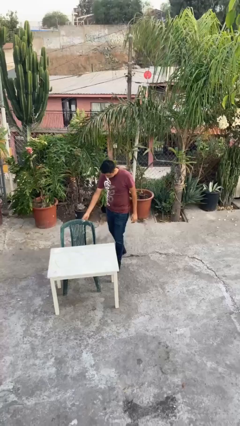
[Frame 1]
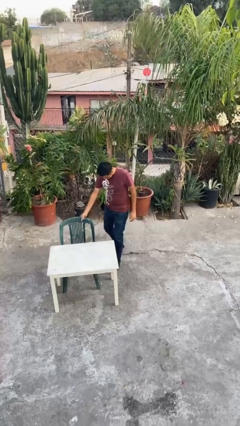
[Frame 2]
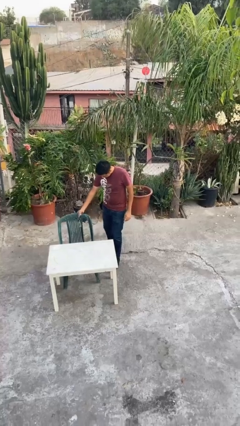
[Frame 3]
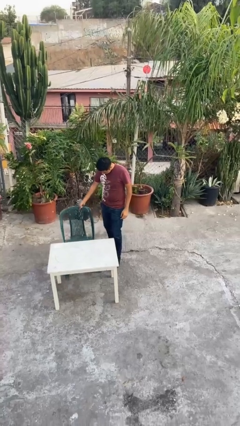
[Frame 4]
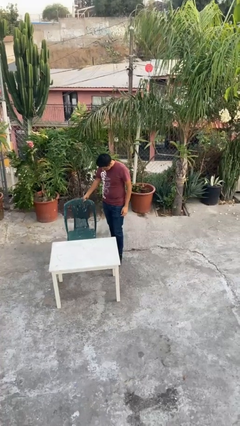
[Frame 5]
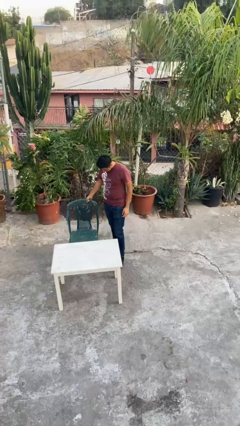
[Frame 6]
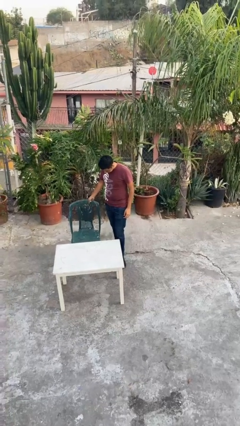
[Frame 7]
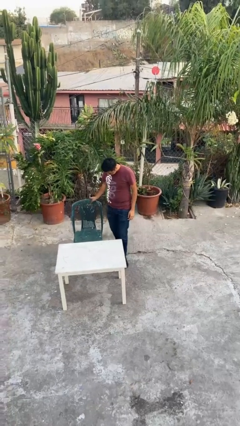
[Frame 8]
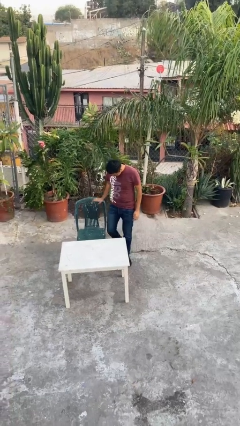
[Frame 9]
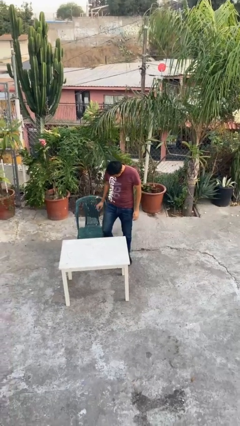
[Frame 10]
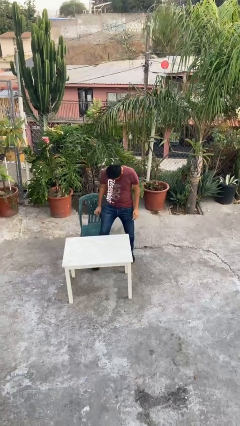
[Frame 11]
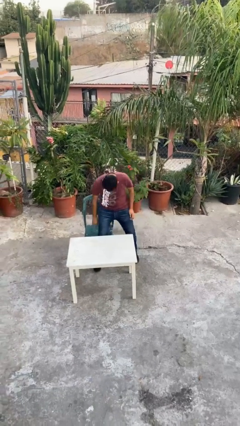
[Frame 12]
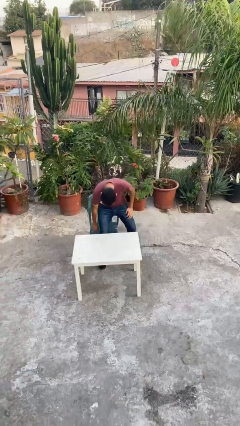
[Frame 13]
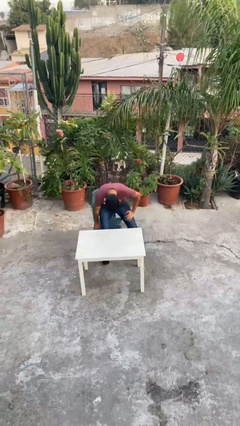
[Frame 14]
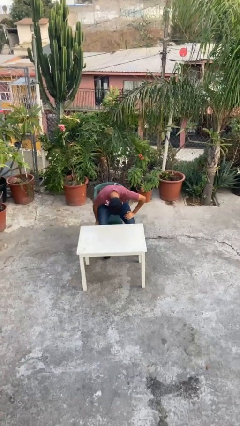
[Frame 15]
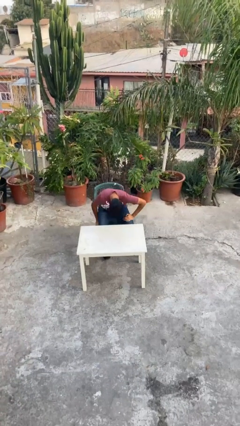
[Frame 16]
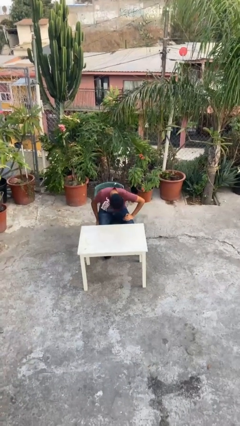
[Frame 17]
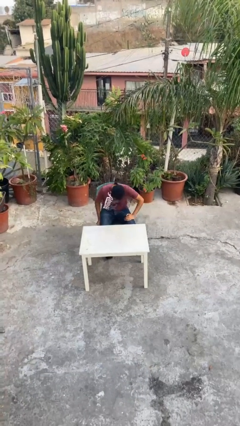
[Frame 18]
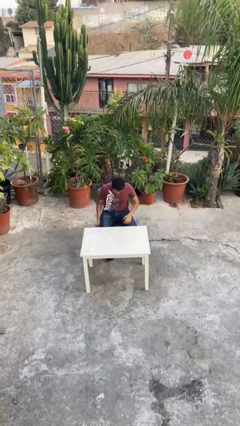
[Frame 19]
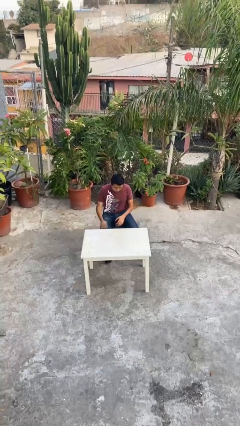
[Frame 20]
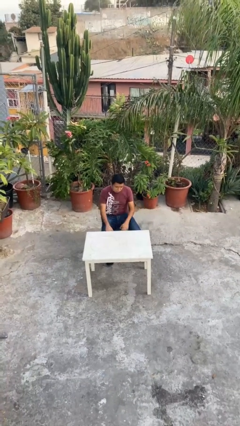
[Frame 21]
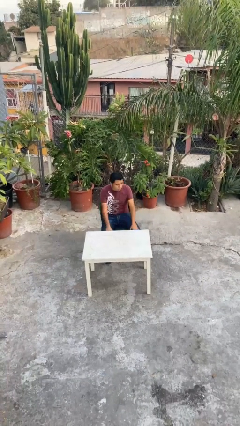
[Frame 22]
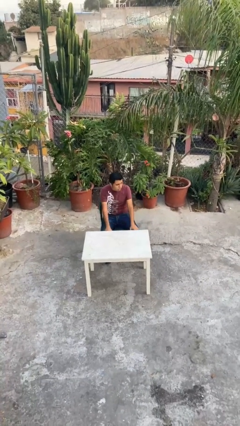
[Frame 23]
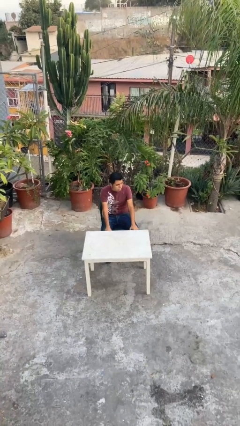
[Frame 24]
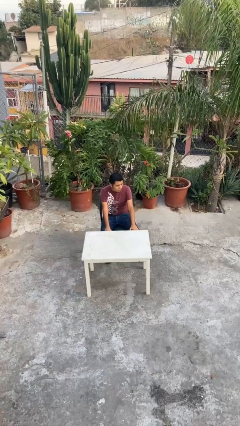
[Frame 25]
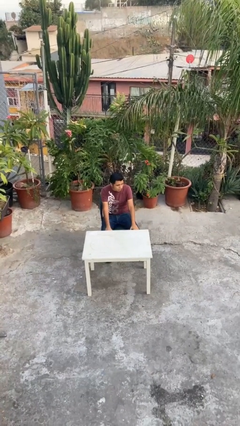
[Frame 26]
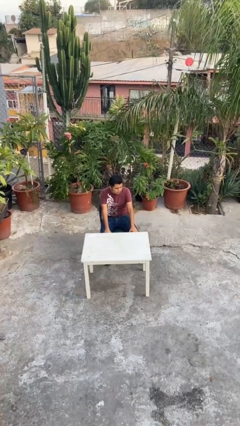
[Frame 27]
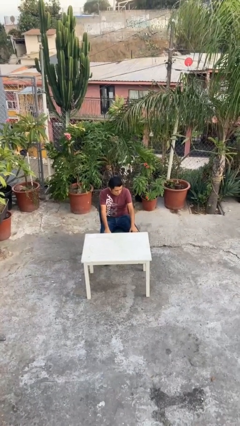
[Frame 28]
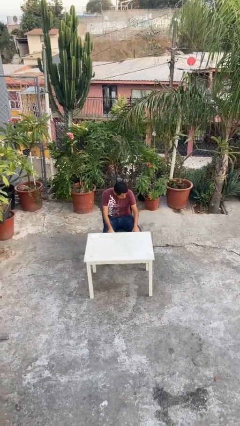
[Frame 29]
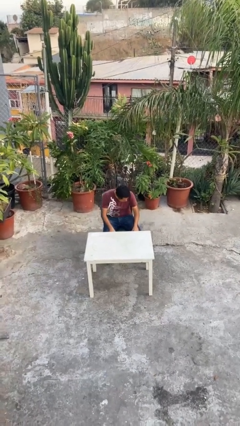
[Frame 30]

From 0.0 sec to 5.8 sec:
person sits down

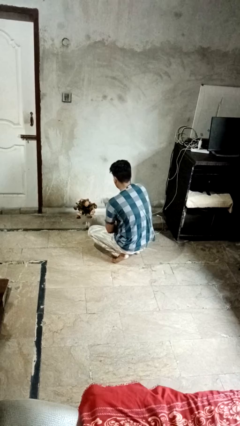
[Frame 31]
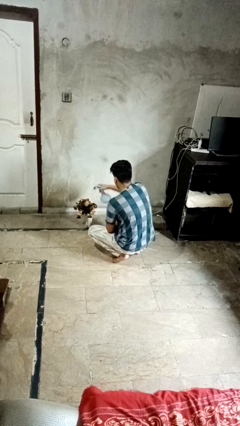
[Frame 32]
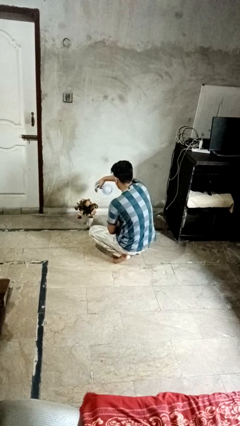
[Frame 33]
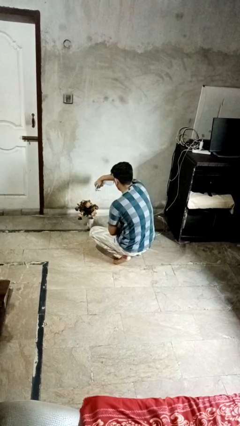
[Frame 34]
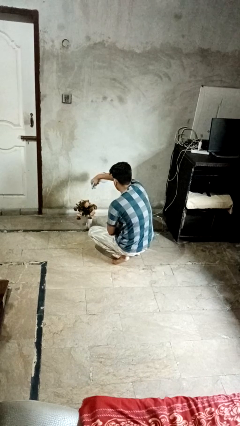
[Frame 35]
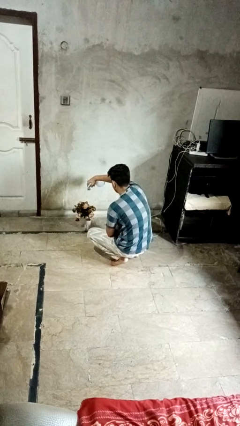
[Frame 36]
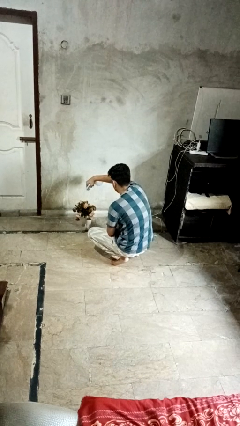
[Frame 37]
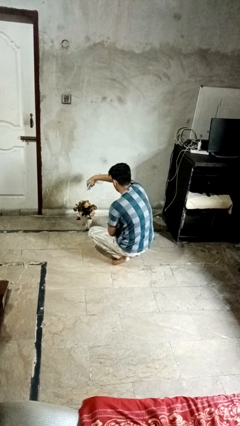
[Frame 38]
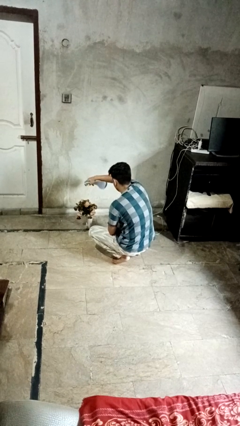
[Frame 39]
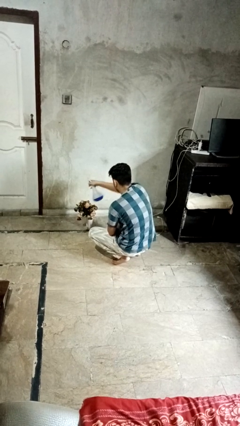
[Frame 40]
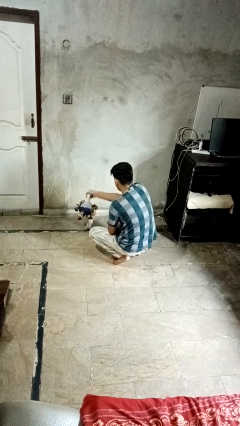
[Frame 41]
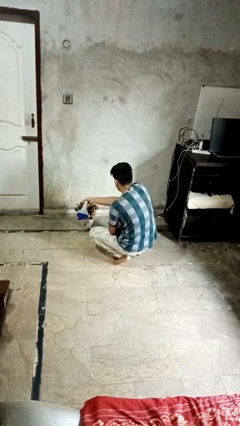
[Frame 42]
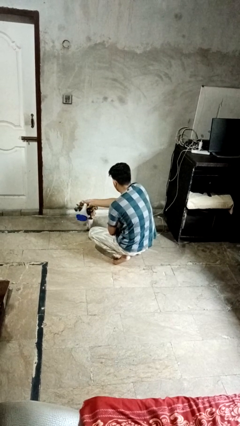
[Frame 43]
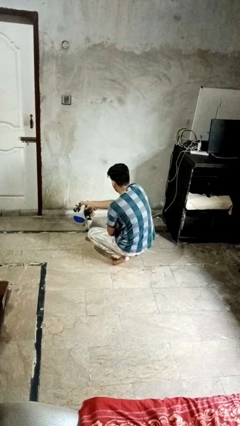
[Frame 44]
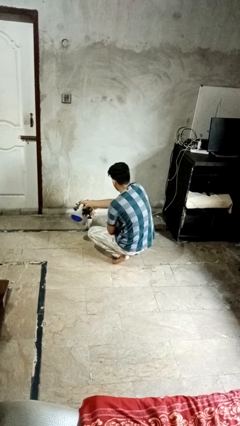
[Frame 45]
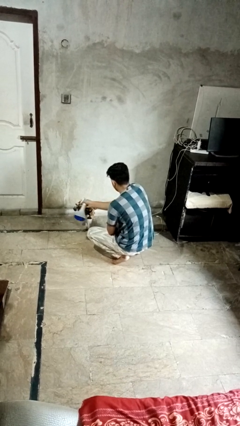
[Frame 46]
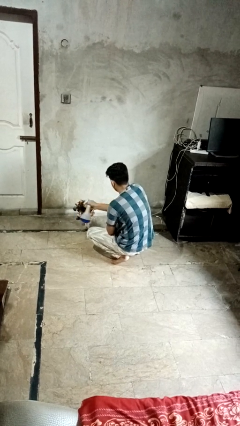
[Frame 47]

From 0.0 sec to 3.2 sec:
person waters houseplant

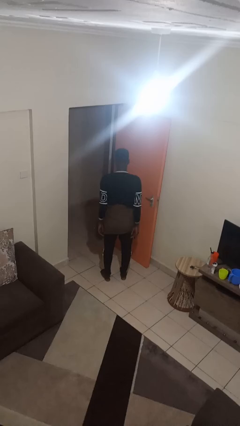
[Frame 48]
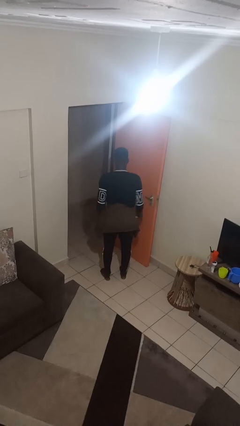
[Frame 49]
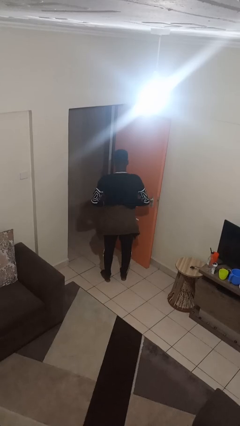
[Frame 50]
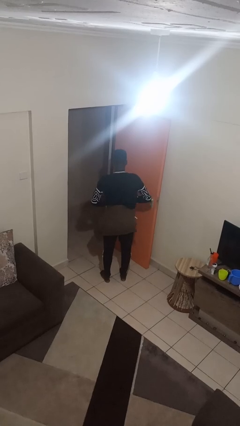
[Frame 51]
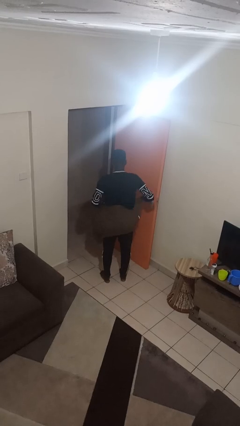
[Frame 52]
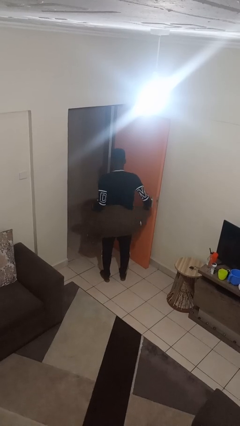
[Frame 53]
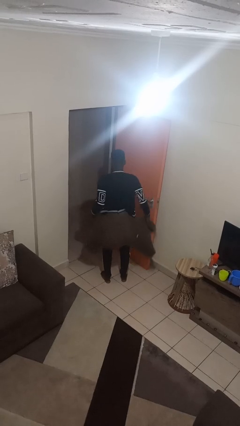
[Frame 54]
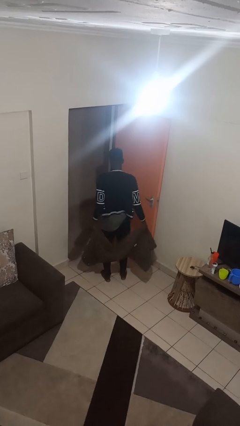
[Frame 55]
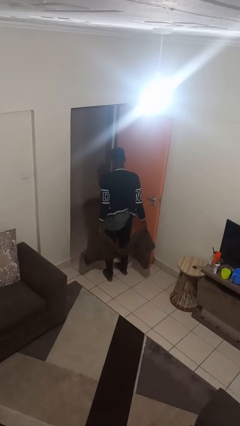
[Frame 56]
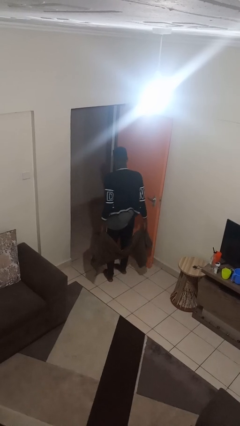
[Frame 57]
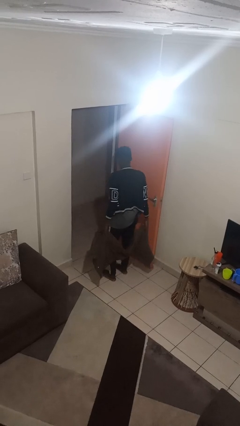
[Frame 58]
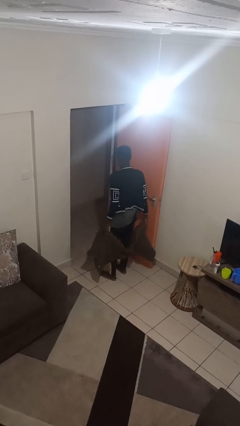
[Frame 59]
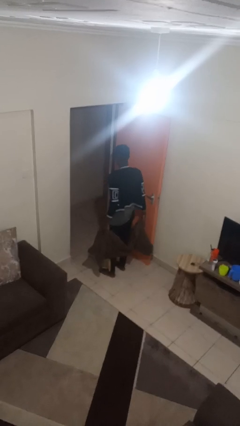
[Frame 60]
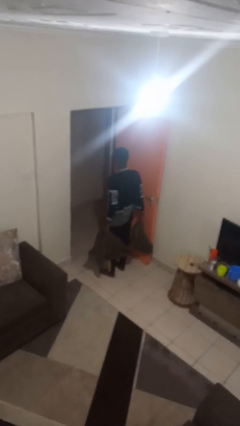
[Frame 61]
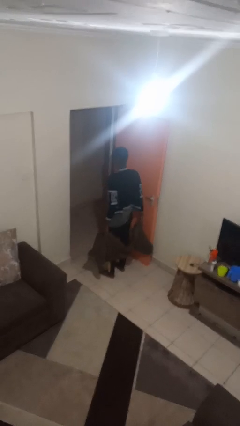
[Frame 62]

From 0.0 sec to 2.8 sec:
person unties jacket around waist

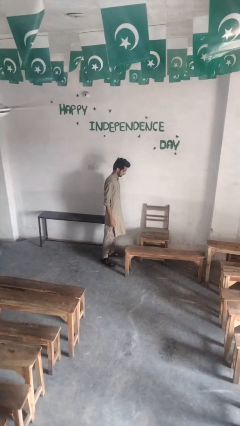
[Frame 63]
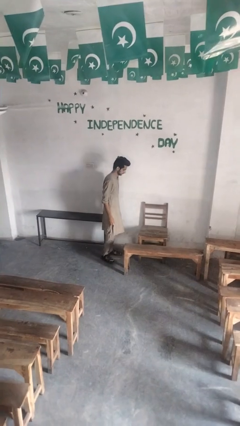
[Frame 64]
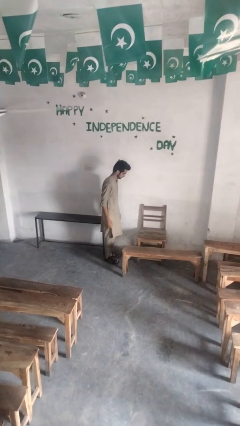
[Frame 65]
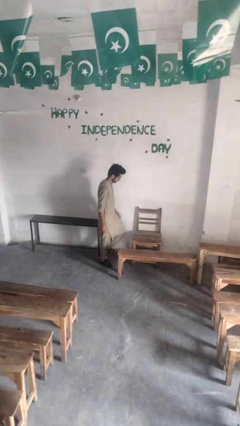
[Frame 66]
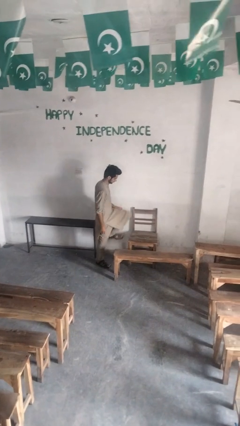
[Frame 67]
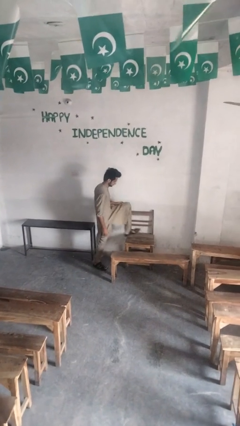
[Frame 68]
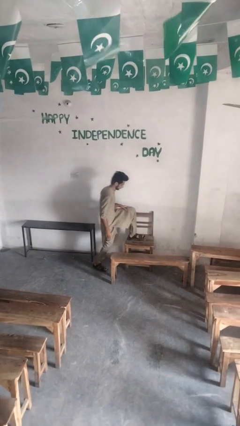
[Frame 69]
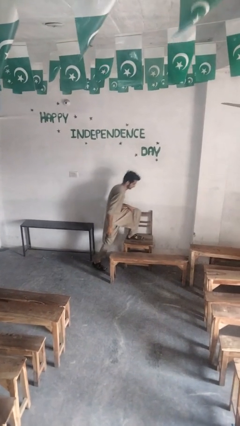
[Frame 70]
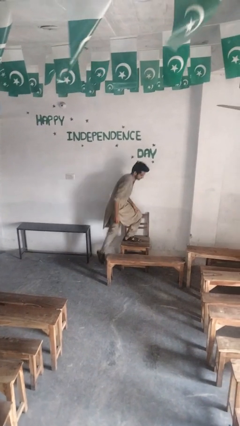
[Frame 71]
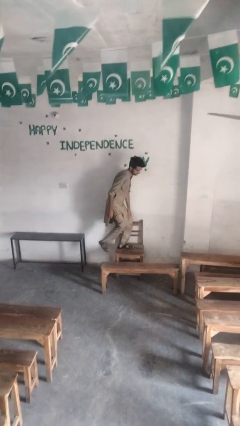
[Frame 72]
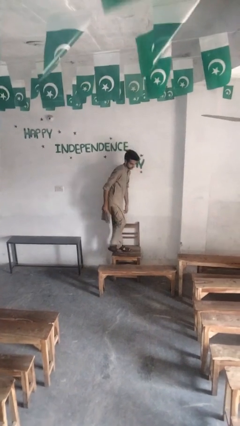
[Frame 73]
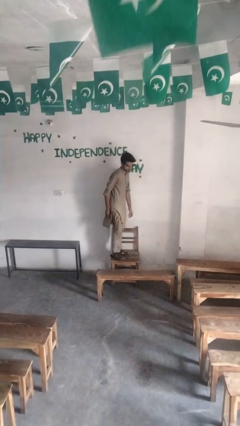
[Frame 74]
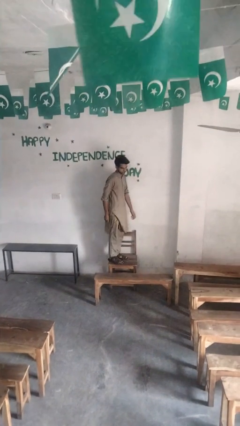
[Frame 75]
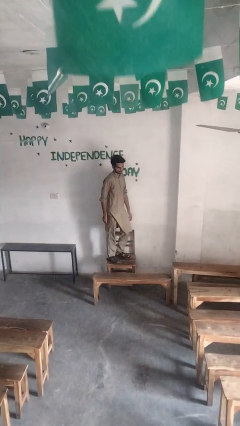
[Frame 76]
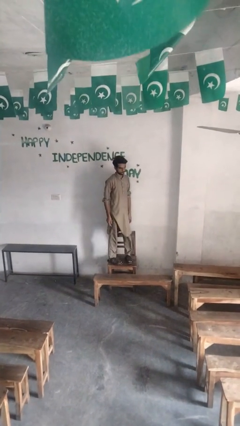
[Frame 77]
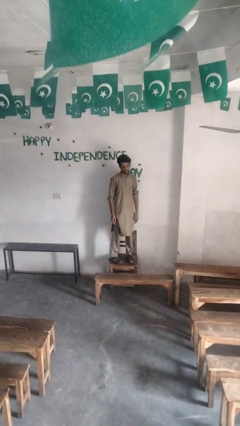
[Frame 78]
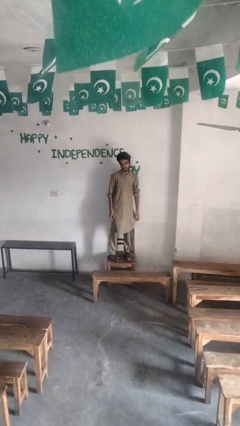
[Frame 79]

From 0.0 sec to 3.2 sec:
person climbs on chair

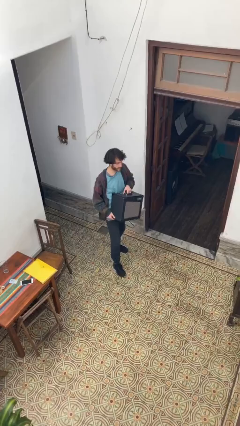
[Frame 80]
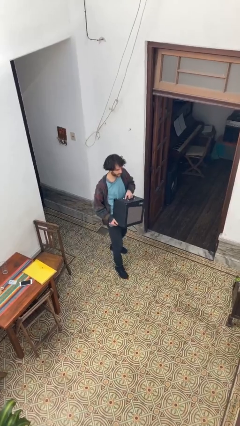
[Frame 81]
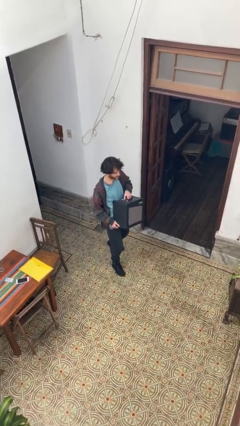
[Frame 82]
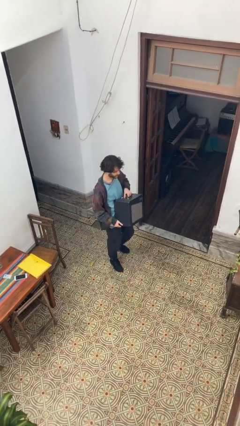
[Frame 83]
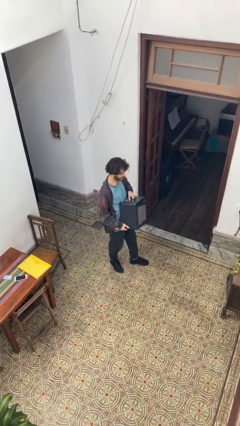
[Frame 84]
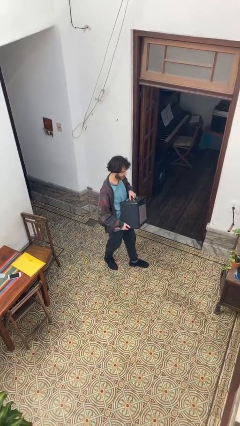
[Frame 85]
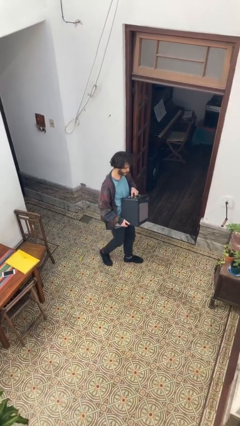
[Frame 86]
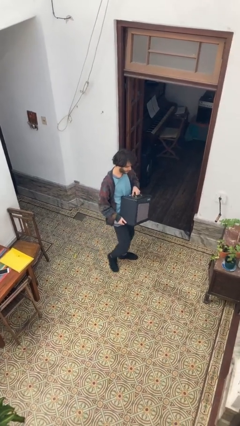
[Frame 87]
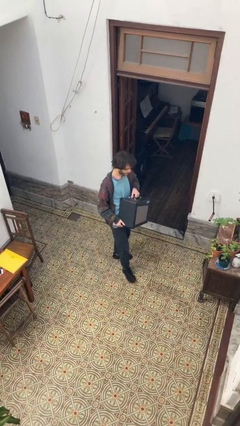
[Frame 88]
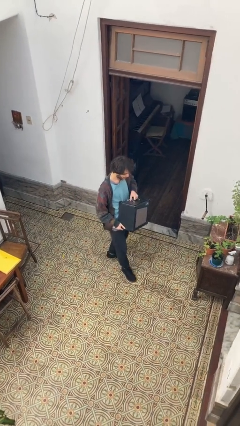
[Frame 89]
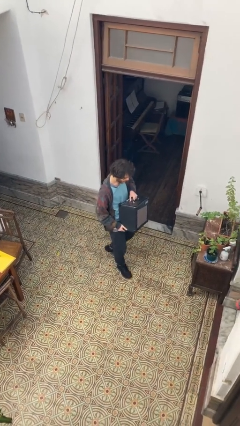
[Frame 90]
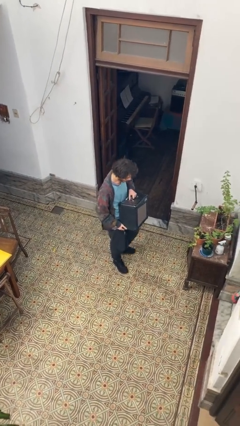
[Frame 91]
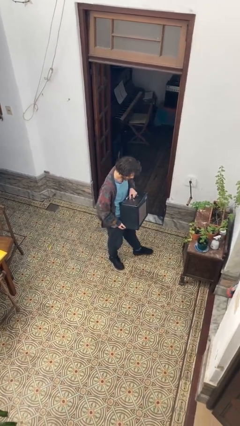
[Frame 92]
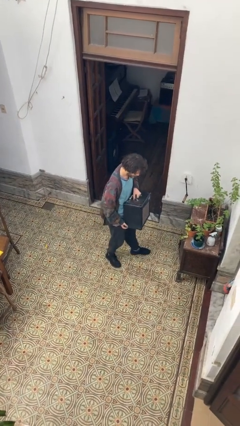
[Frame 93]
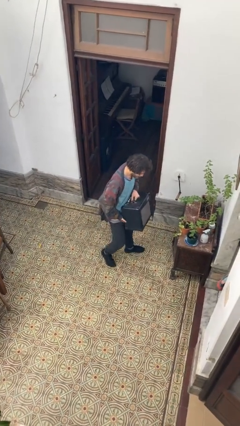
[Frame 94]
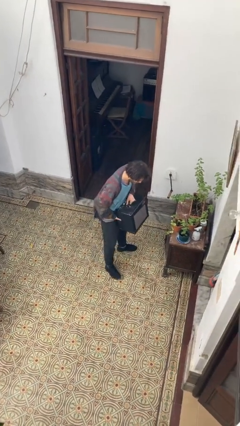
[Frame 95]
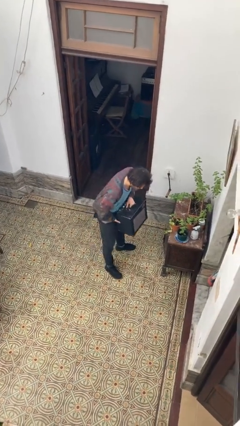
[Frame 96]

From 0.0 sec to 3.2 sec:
person carries heavy object
